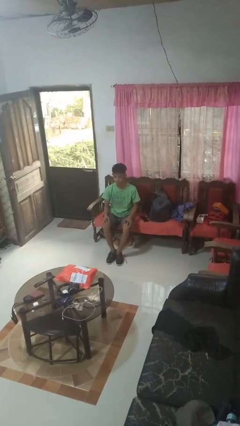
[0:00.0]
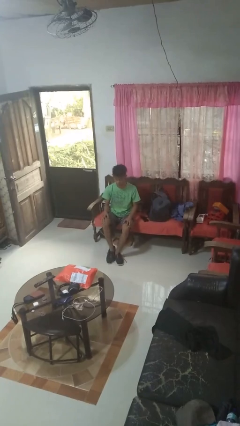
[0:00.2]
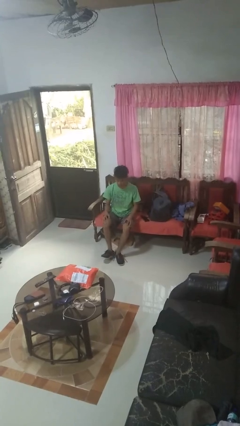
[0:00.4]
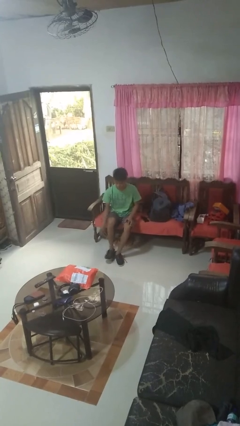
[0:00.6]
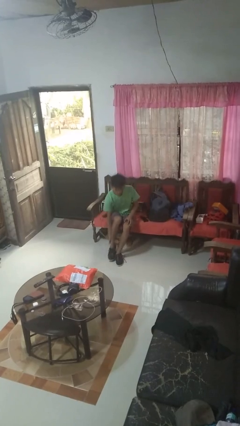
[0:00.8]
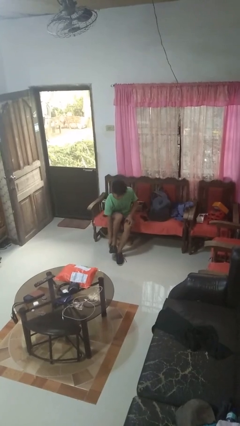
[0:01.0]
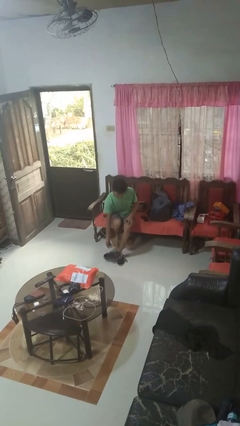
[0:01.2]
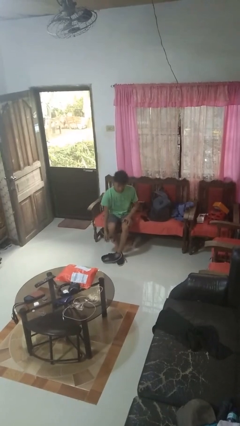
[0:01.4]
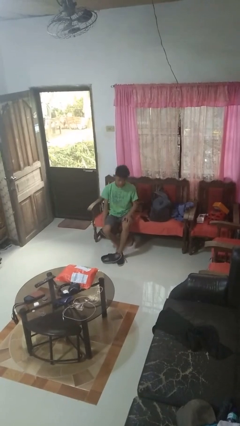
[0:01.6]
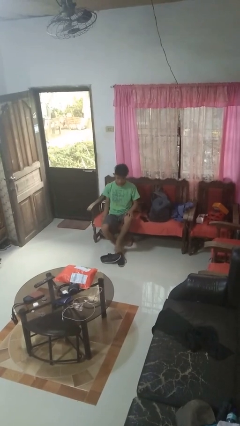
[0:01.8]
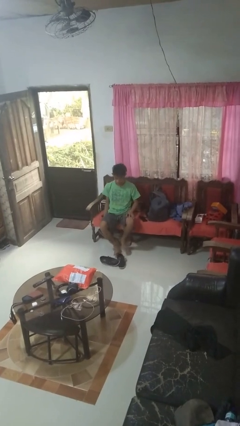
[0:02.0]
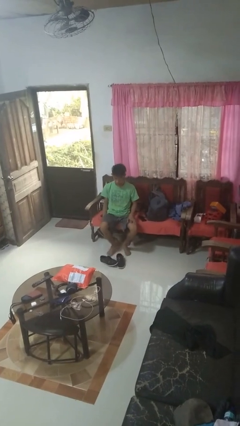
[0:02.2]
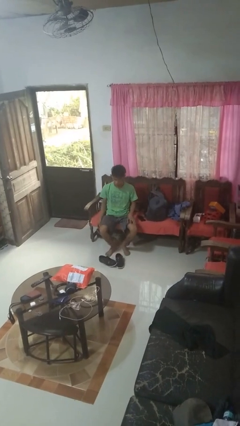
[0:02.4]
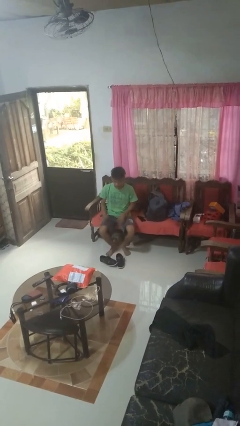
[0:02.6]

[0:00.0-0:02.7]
person takes off shoes

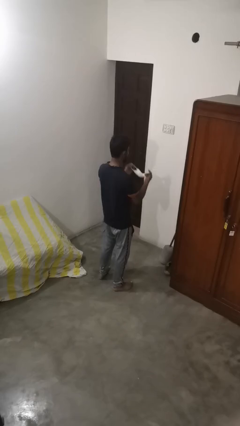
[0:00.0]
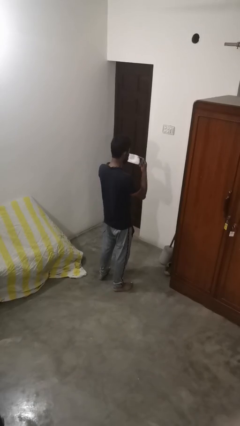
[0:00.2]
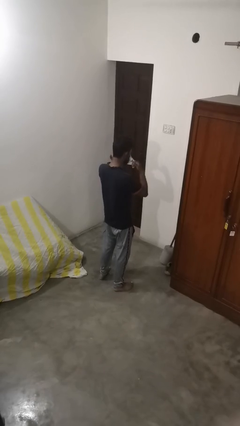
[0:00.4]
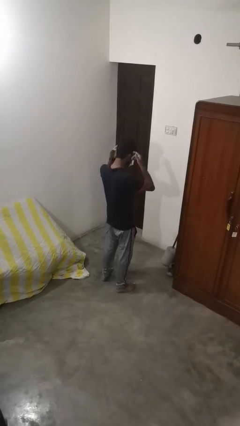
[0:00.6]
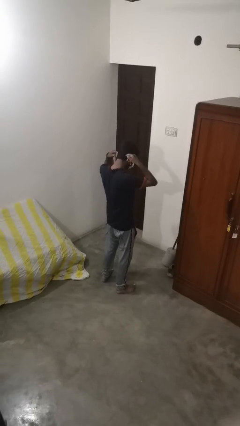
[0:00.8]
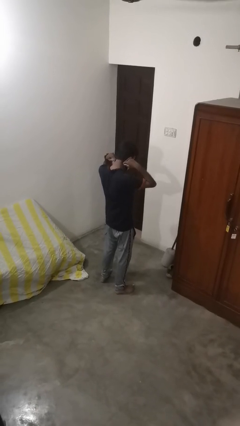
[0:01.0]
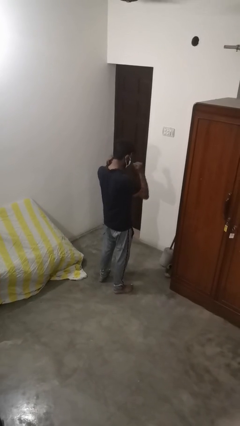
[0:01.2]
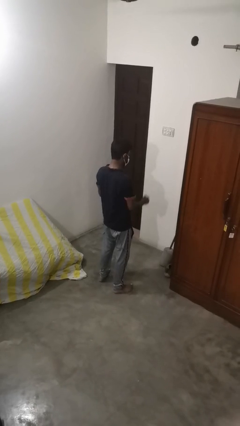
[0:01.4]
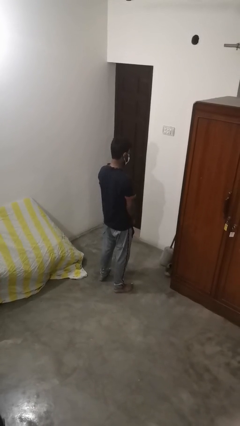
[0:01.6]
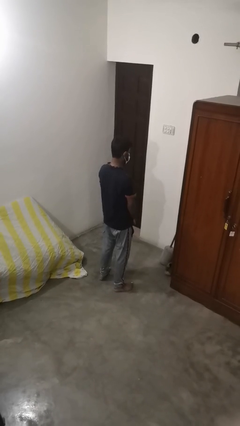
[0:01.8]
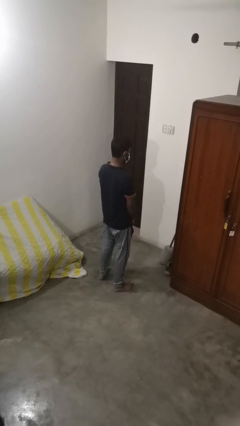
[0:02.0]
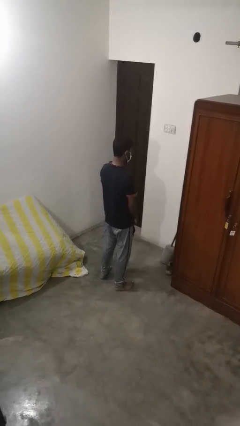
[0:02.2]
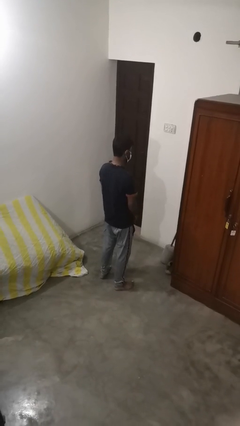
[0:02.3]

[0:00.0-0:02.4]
person puts on facemask

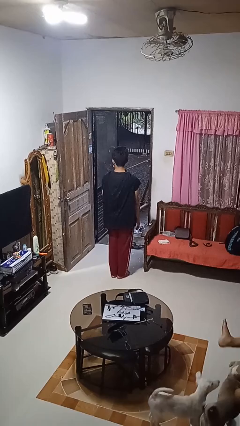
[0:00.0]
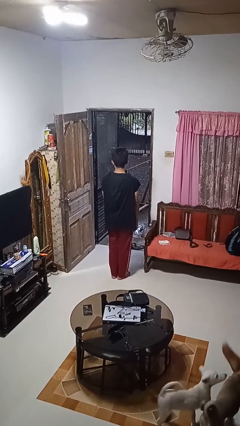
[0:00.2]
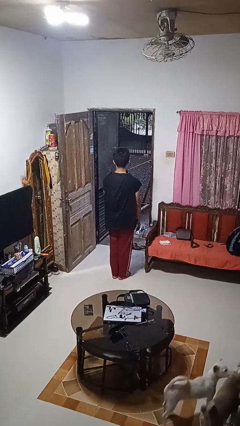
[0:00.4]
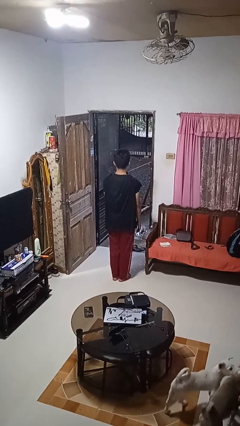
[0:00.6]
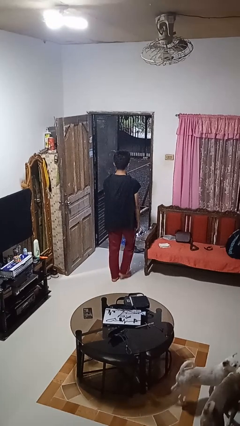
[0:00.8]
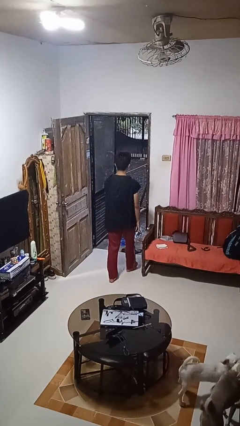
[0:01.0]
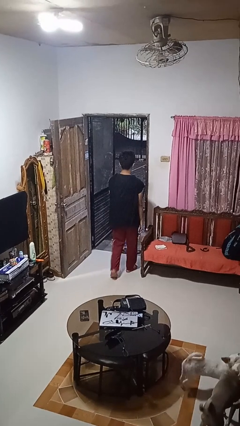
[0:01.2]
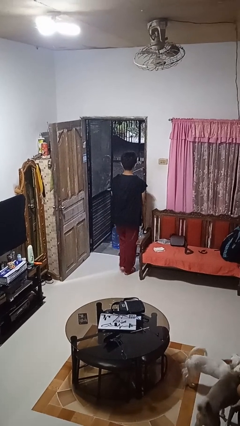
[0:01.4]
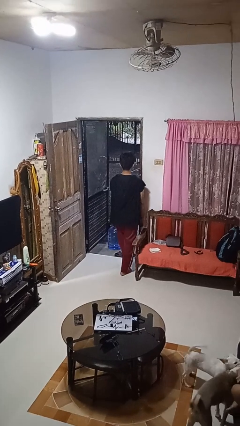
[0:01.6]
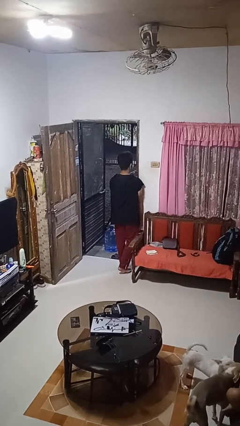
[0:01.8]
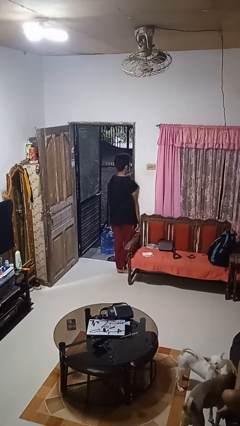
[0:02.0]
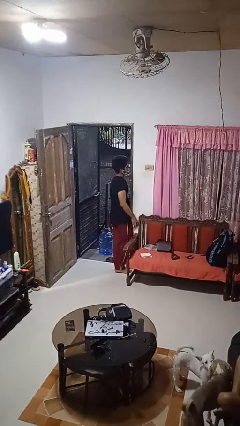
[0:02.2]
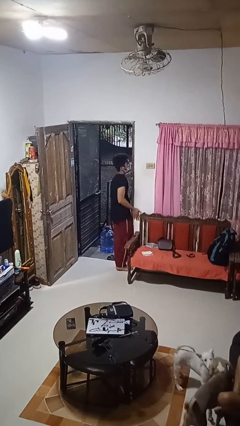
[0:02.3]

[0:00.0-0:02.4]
person bumps into wall

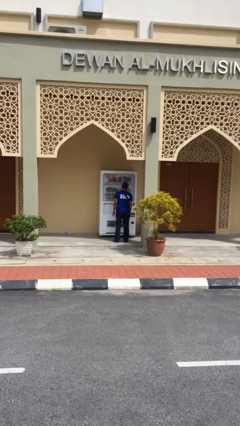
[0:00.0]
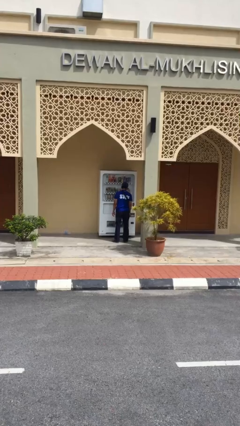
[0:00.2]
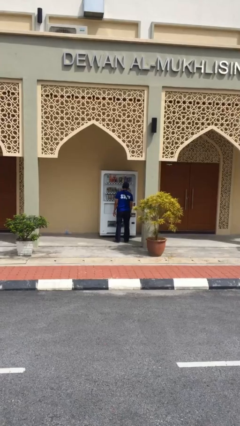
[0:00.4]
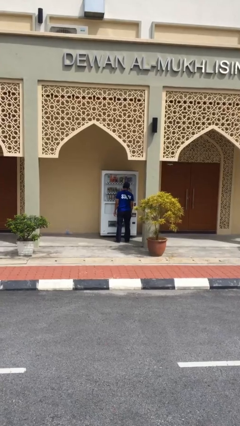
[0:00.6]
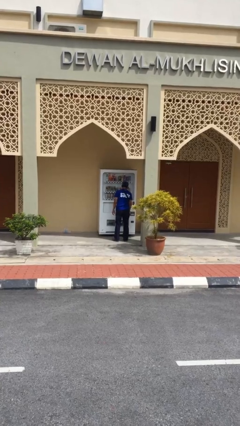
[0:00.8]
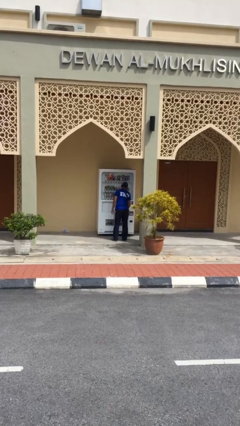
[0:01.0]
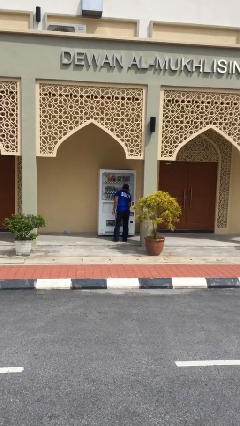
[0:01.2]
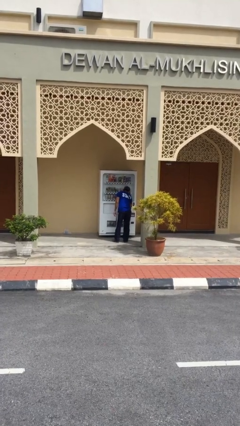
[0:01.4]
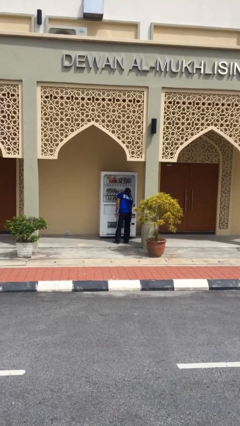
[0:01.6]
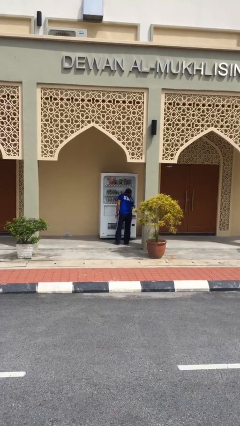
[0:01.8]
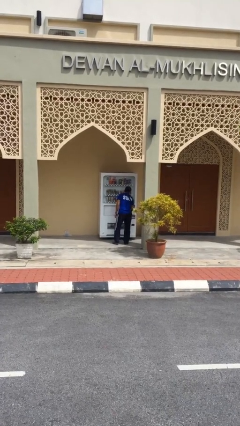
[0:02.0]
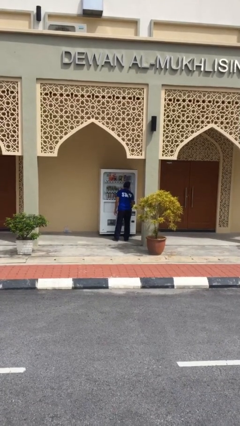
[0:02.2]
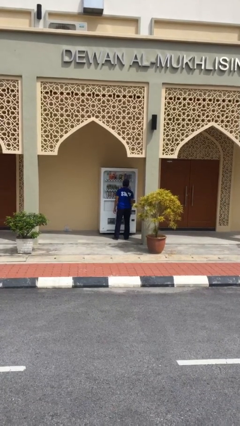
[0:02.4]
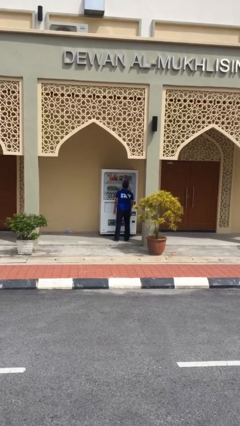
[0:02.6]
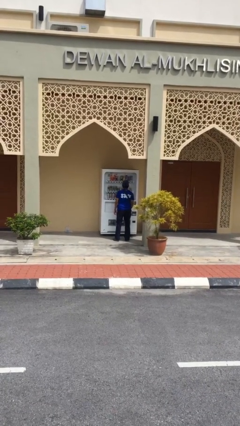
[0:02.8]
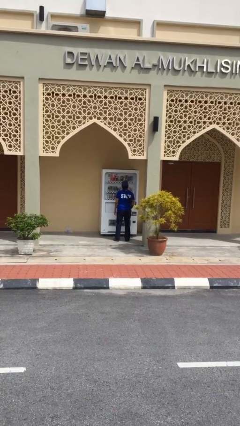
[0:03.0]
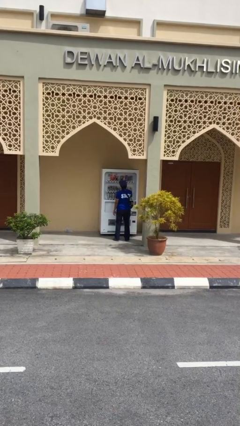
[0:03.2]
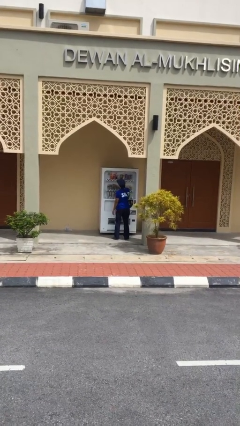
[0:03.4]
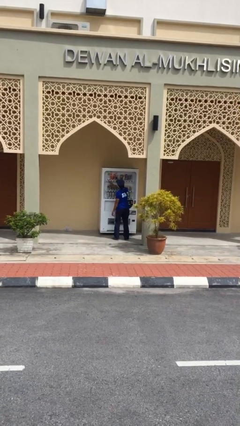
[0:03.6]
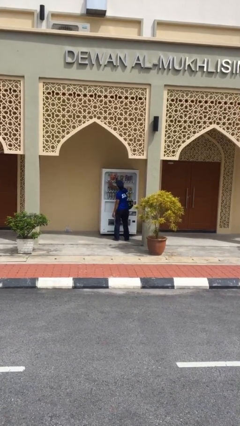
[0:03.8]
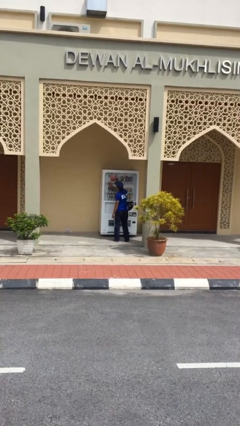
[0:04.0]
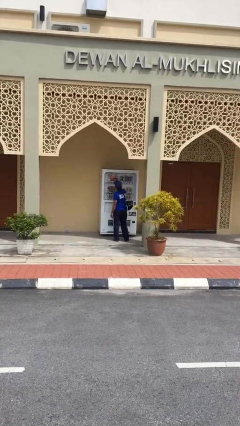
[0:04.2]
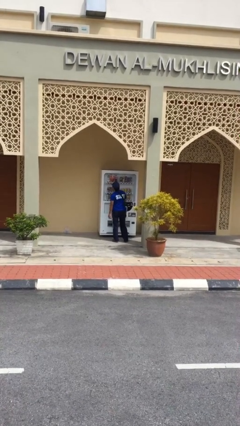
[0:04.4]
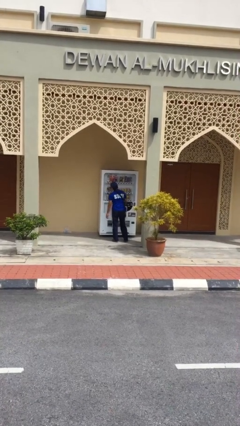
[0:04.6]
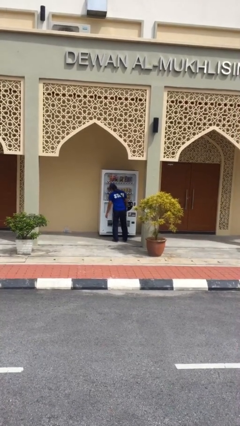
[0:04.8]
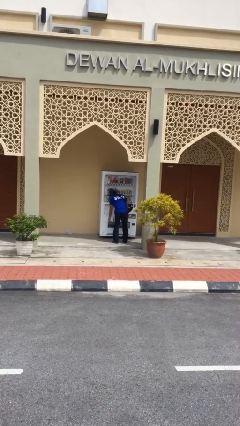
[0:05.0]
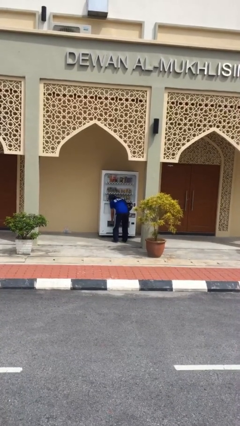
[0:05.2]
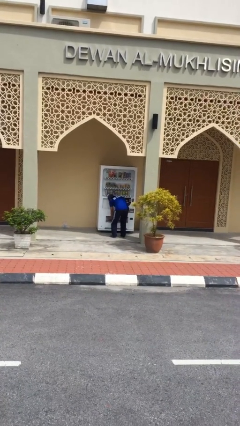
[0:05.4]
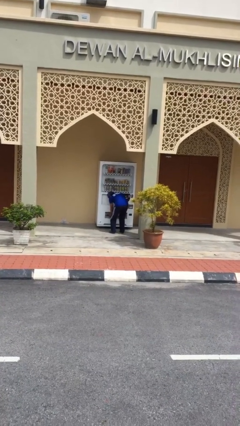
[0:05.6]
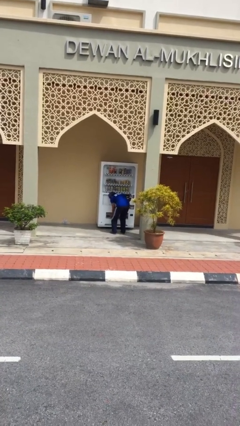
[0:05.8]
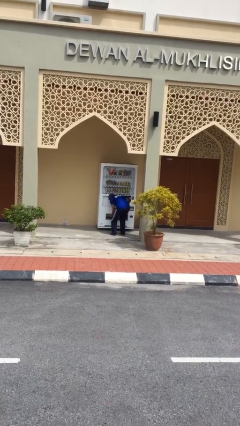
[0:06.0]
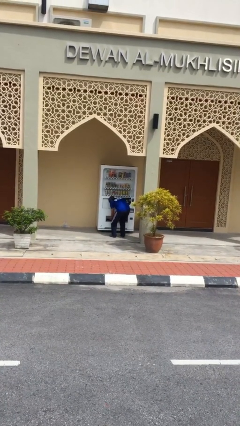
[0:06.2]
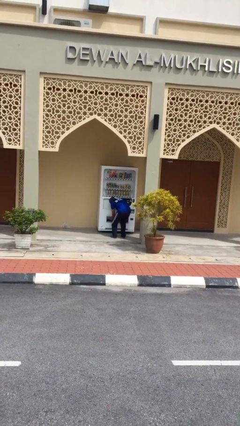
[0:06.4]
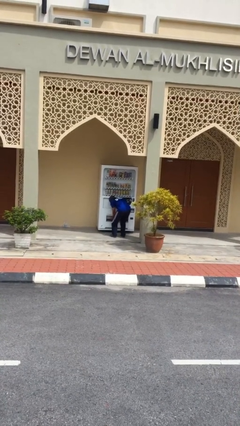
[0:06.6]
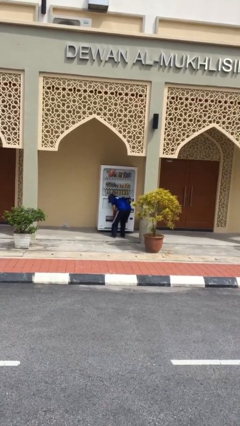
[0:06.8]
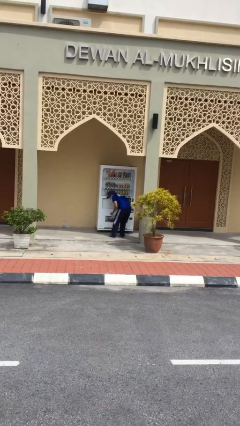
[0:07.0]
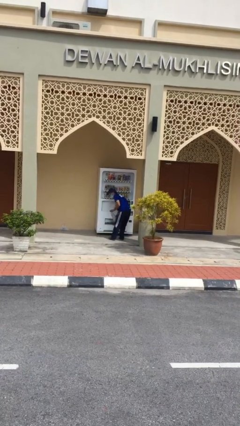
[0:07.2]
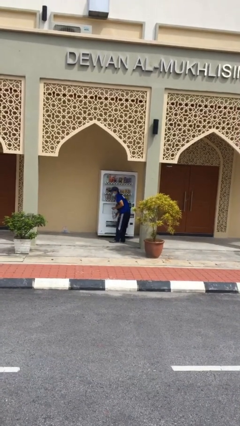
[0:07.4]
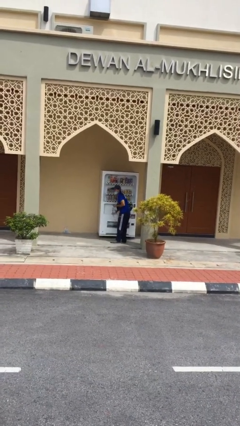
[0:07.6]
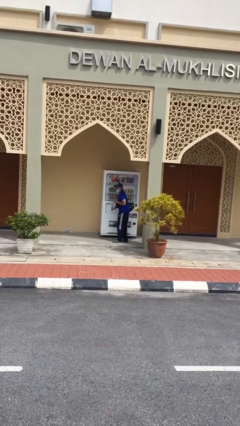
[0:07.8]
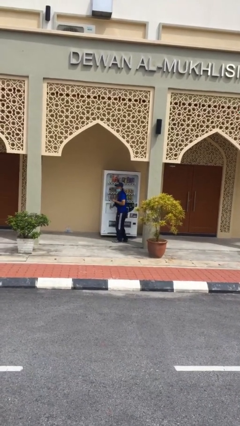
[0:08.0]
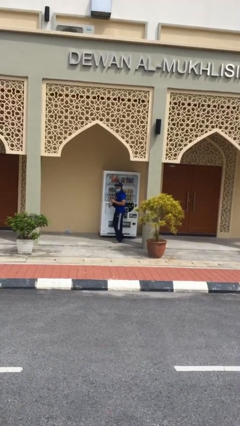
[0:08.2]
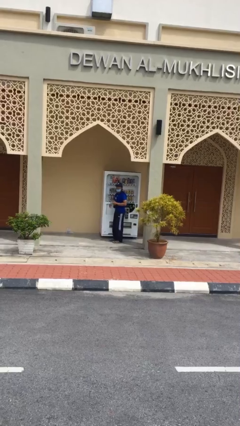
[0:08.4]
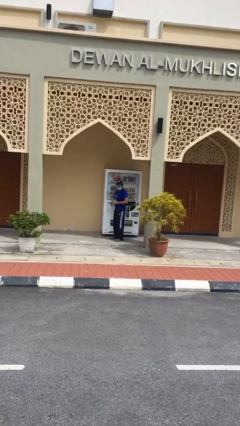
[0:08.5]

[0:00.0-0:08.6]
person purchases from machine

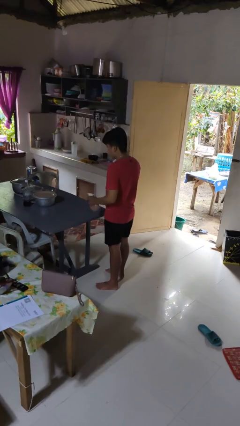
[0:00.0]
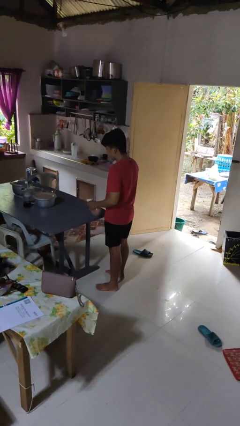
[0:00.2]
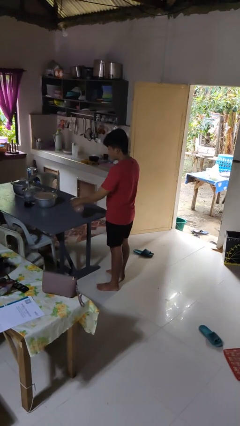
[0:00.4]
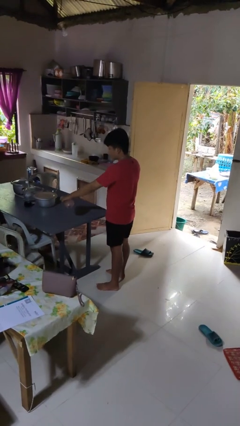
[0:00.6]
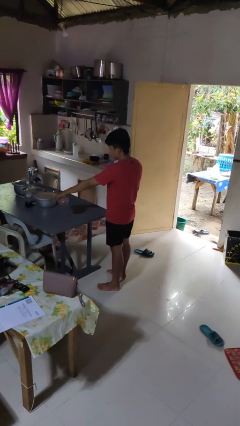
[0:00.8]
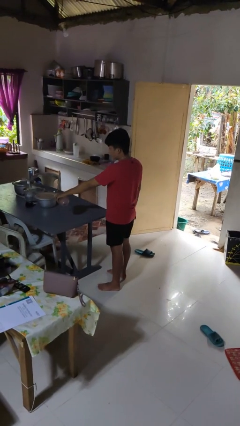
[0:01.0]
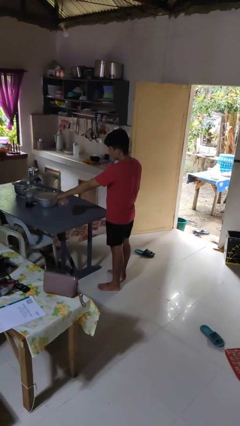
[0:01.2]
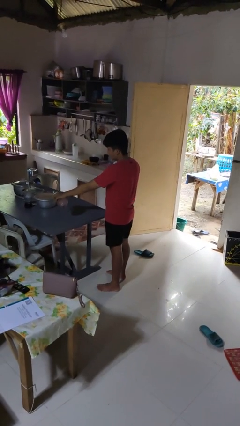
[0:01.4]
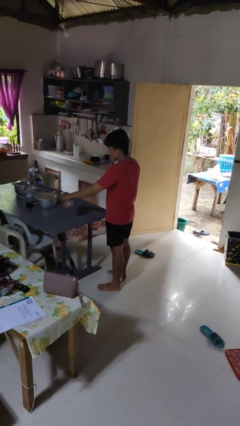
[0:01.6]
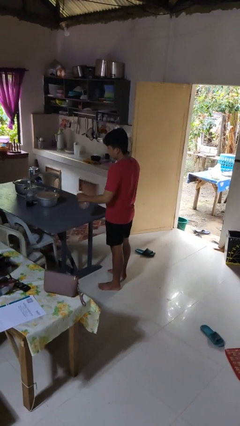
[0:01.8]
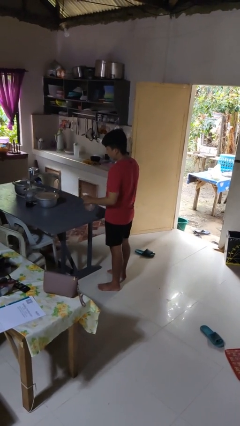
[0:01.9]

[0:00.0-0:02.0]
person sprays from bottle
